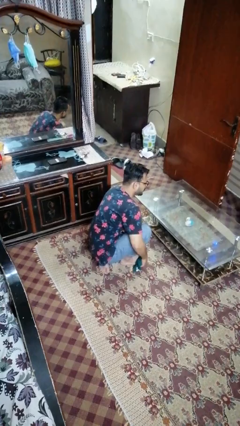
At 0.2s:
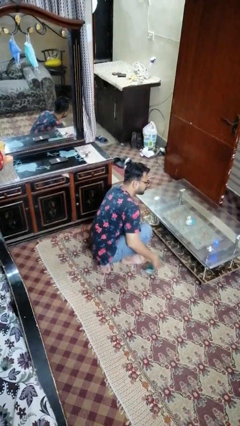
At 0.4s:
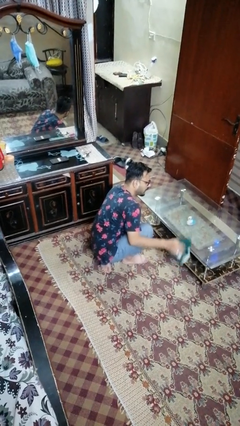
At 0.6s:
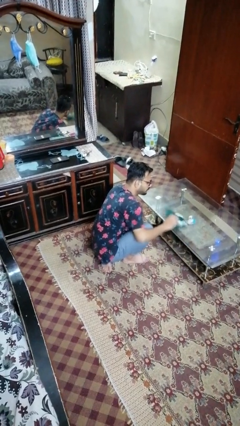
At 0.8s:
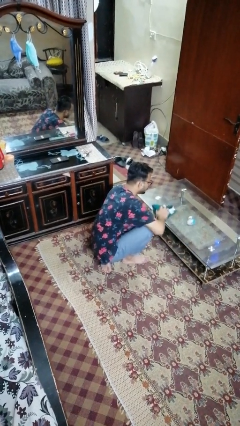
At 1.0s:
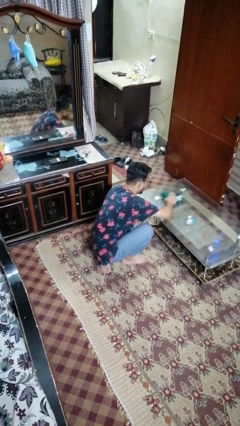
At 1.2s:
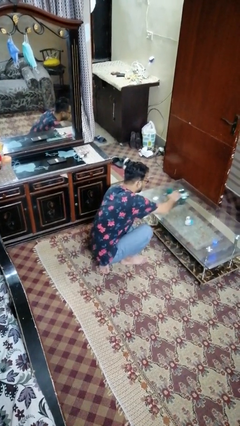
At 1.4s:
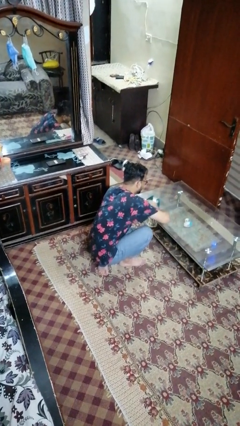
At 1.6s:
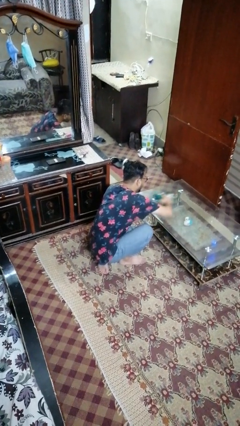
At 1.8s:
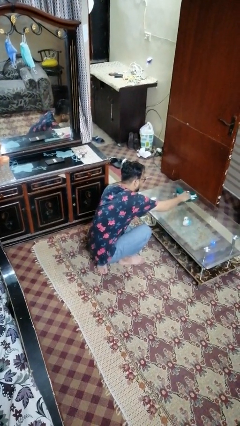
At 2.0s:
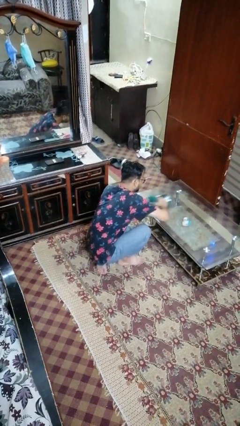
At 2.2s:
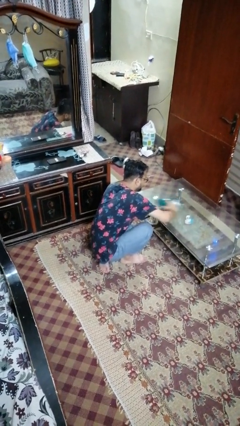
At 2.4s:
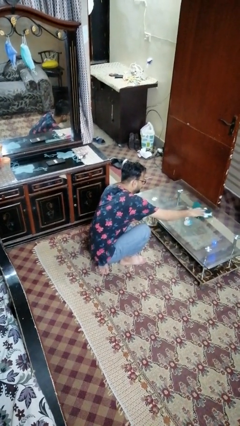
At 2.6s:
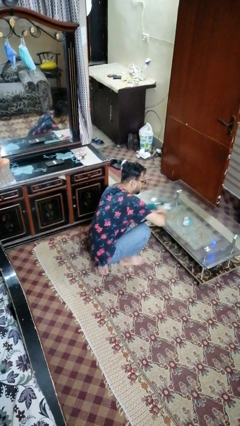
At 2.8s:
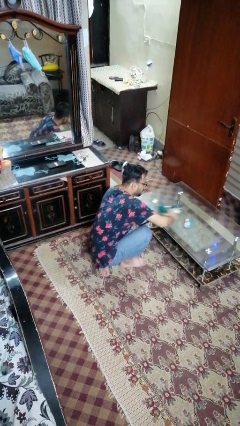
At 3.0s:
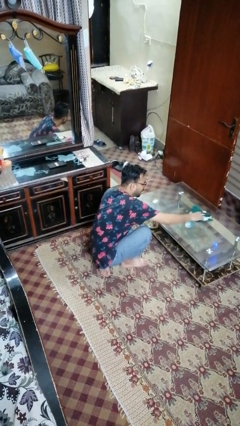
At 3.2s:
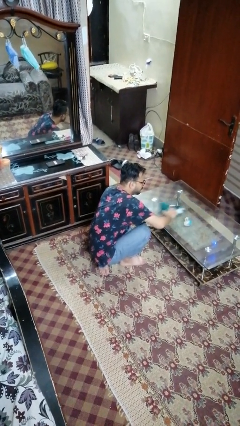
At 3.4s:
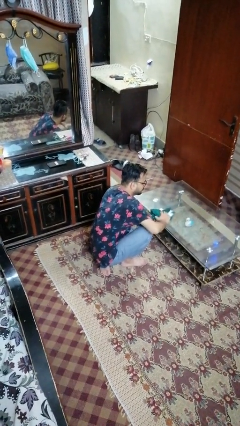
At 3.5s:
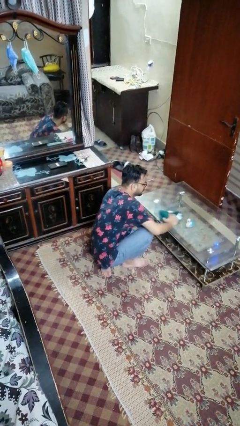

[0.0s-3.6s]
person cleans table with rag

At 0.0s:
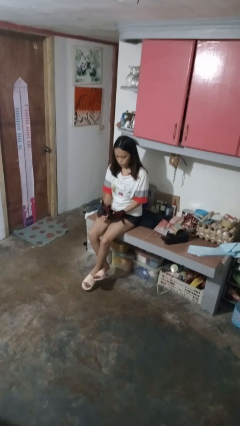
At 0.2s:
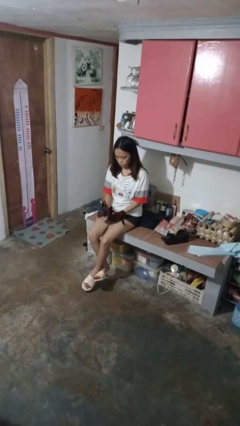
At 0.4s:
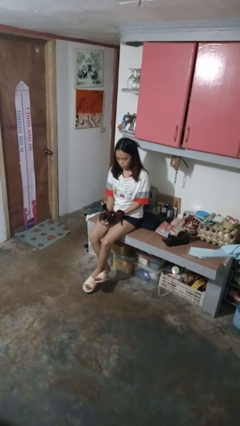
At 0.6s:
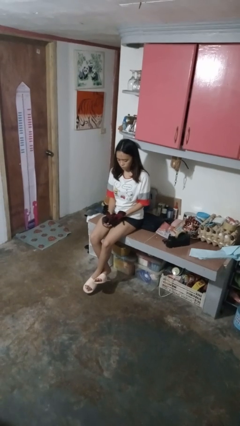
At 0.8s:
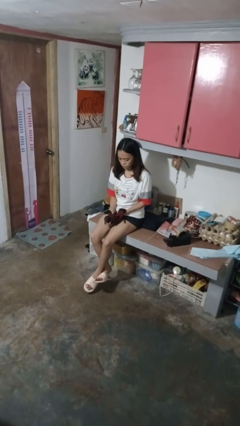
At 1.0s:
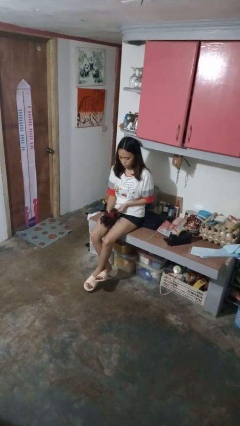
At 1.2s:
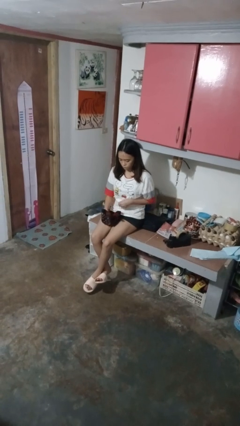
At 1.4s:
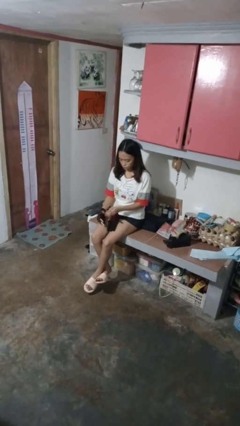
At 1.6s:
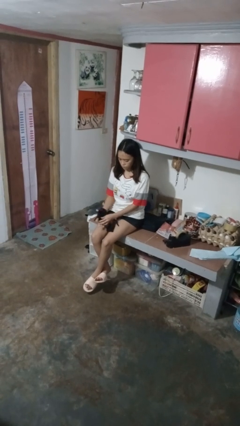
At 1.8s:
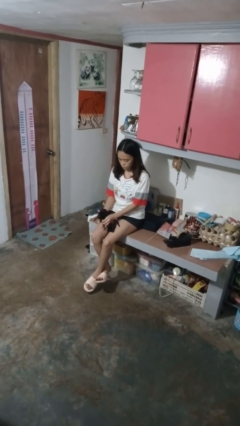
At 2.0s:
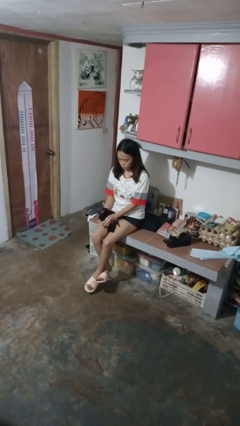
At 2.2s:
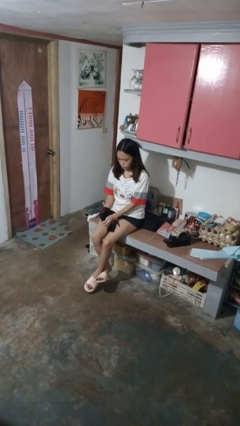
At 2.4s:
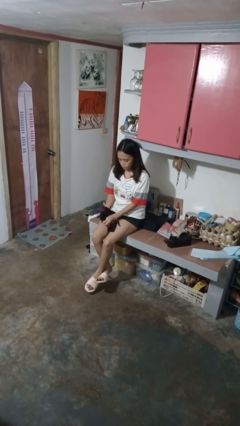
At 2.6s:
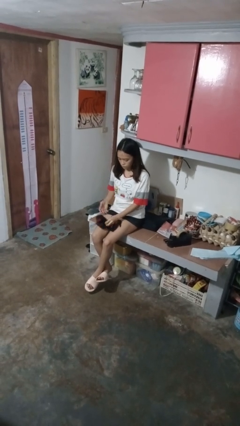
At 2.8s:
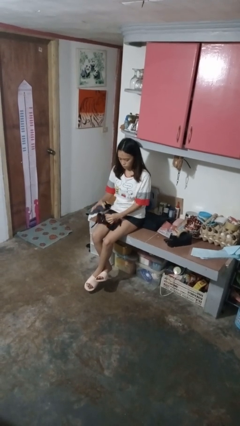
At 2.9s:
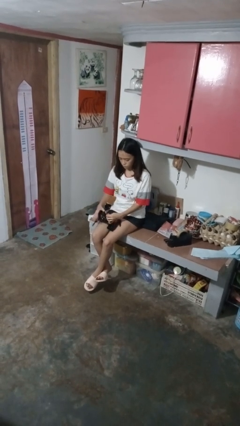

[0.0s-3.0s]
person takes off gloves

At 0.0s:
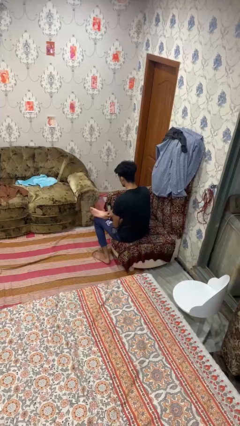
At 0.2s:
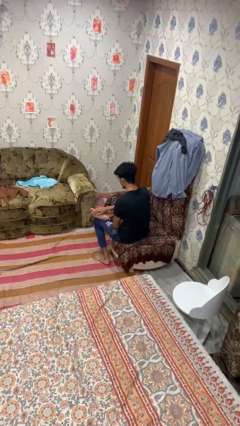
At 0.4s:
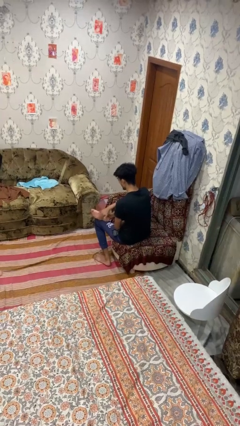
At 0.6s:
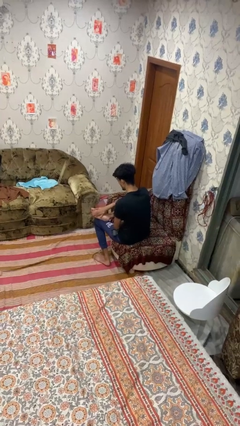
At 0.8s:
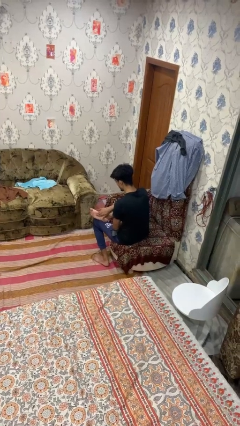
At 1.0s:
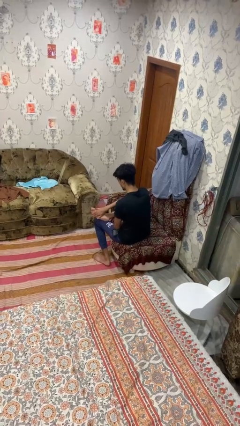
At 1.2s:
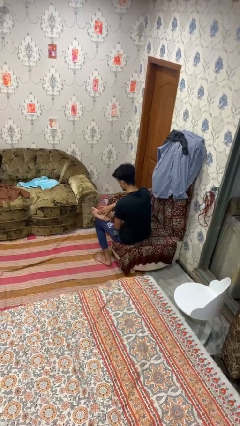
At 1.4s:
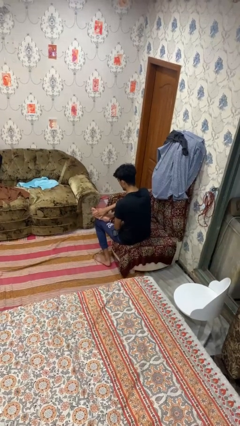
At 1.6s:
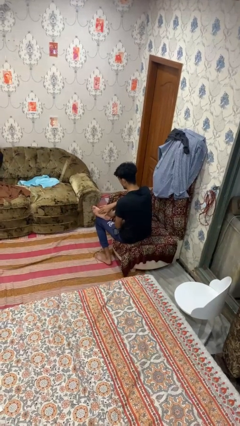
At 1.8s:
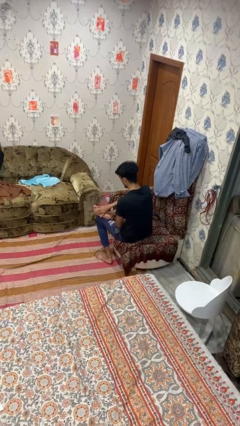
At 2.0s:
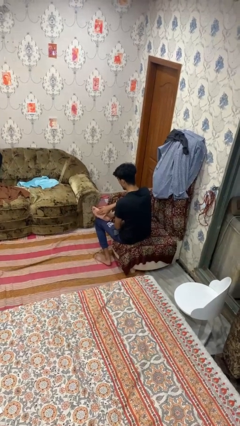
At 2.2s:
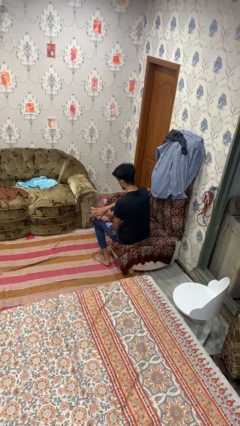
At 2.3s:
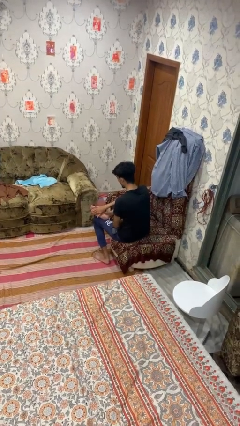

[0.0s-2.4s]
person rubs foot

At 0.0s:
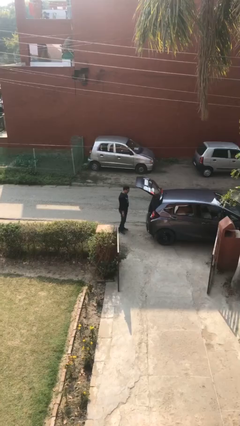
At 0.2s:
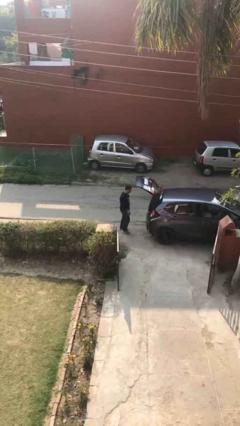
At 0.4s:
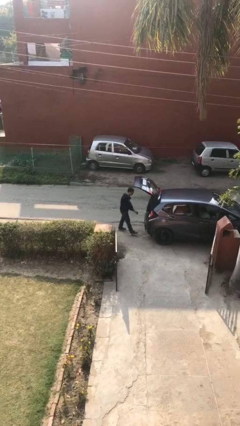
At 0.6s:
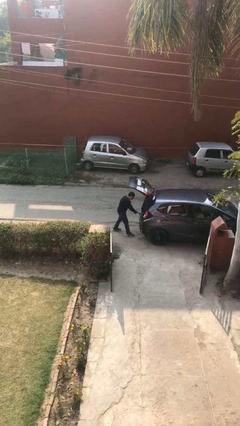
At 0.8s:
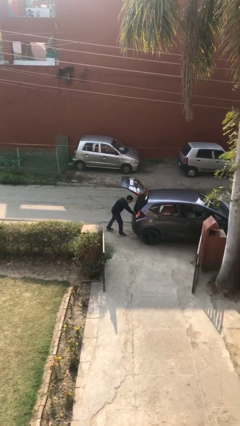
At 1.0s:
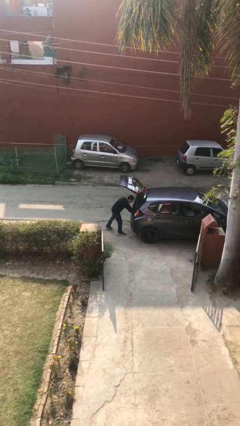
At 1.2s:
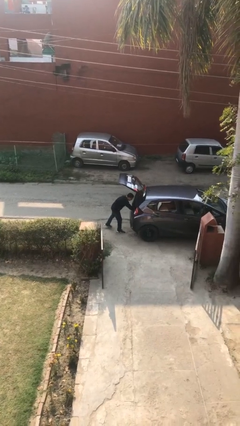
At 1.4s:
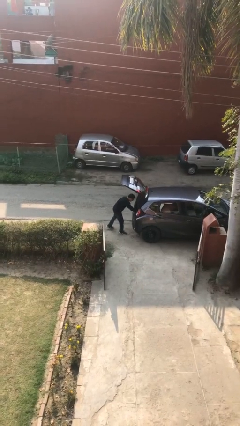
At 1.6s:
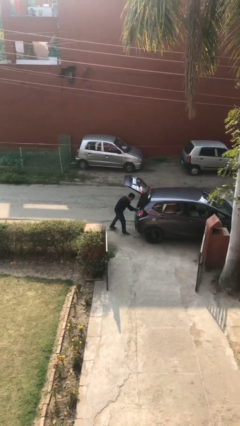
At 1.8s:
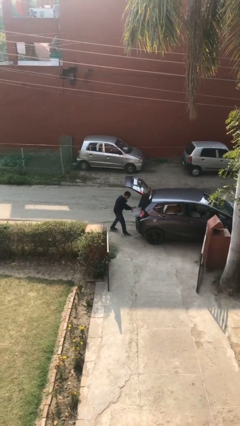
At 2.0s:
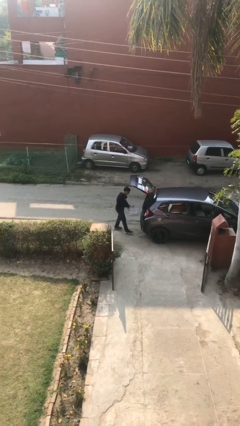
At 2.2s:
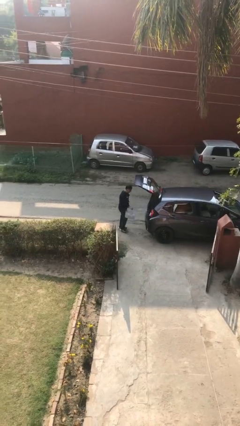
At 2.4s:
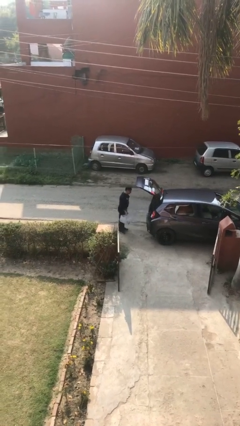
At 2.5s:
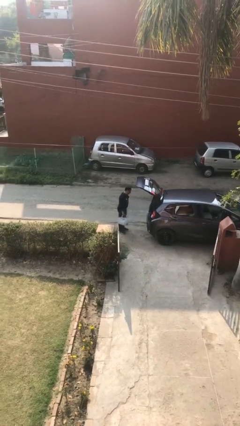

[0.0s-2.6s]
person unloads car

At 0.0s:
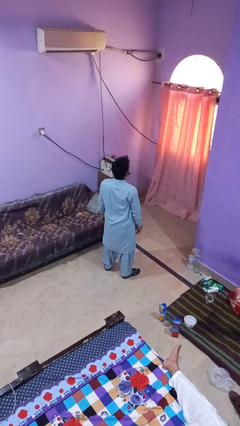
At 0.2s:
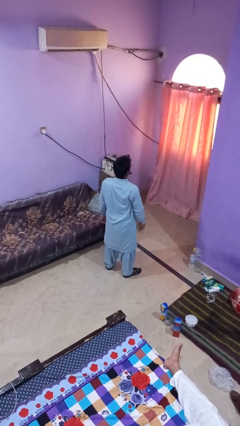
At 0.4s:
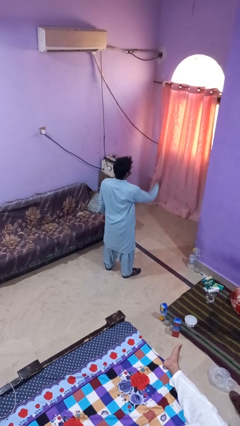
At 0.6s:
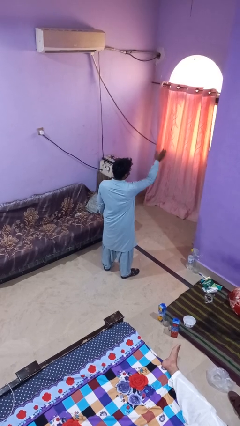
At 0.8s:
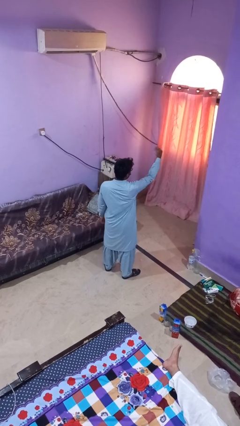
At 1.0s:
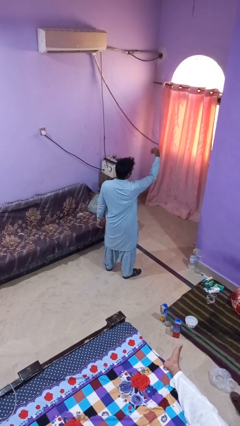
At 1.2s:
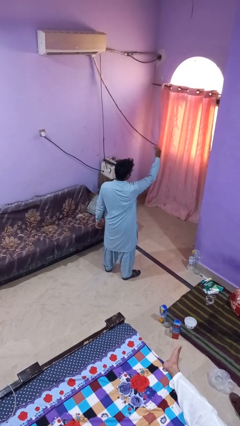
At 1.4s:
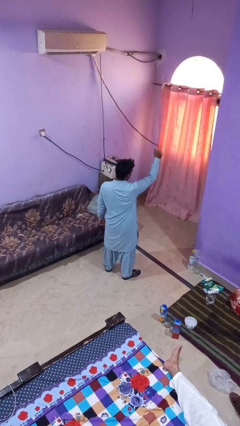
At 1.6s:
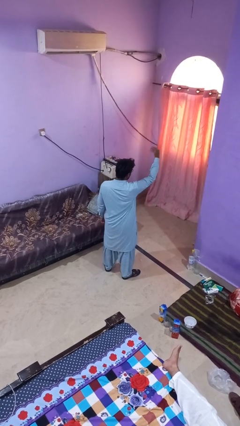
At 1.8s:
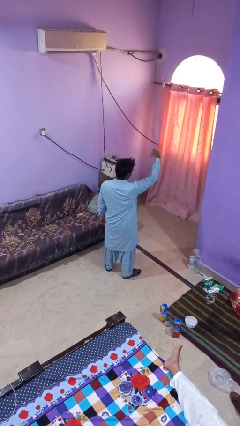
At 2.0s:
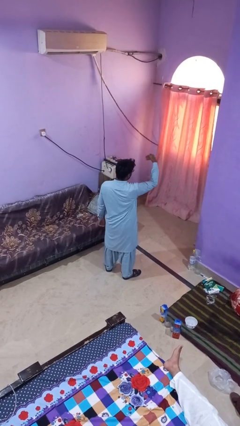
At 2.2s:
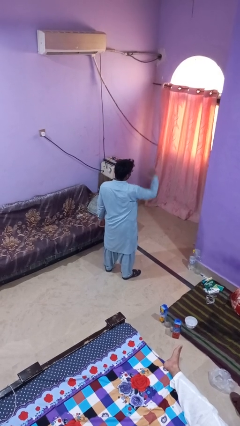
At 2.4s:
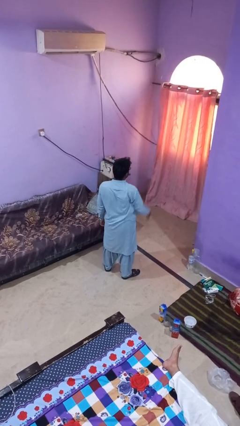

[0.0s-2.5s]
person gestures come here

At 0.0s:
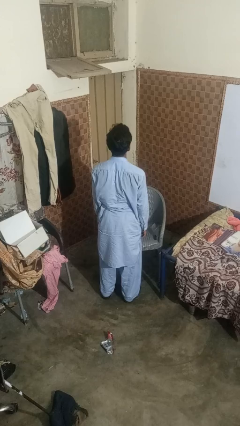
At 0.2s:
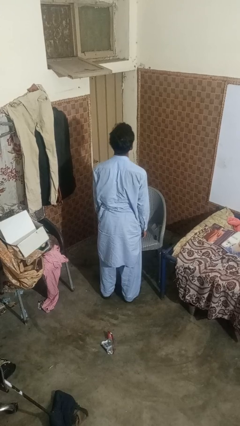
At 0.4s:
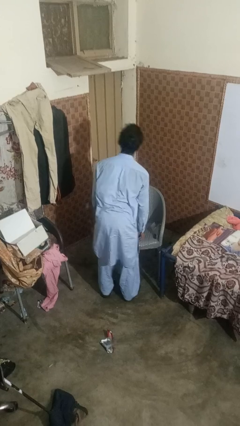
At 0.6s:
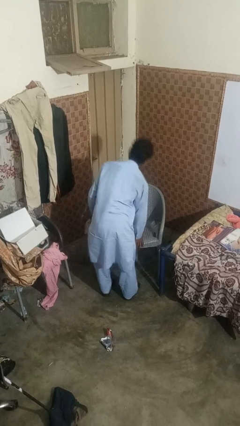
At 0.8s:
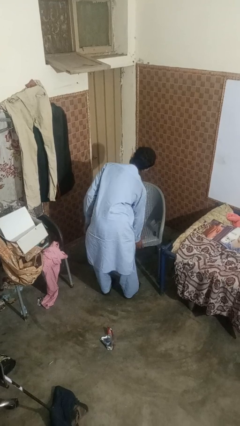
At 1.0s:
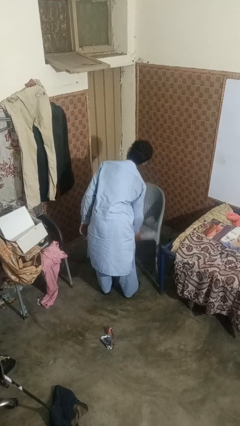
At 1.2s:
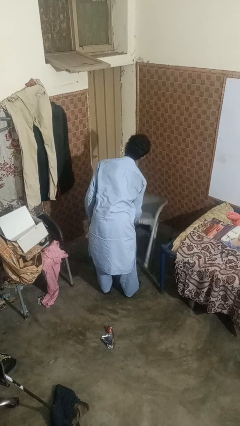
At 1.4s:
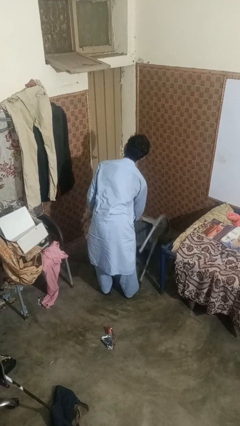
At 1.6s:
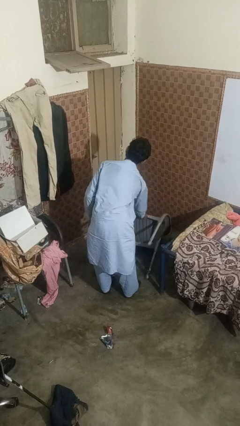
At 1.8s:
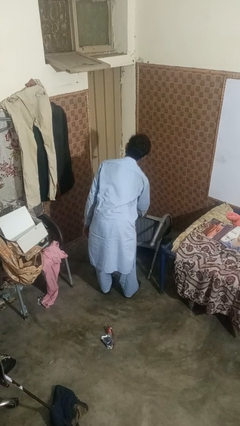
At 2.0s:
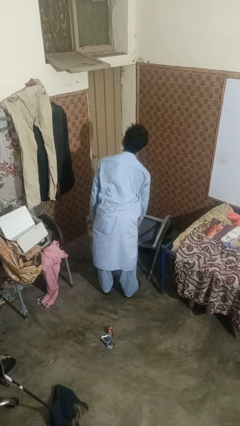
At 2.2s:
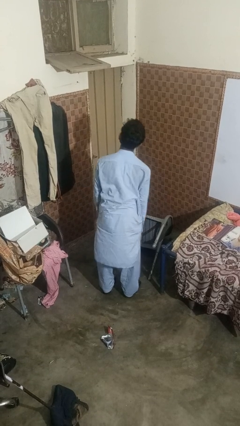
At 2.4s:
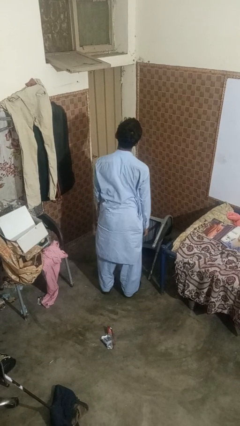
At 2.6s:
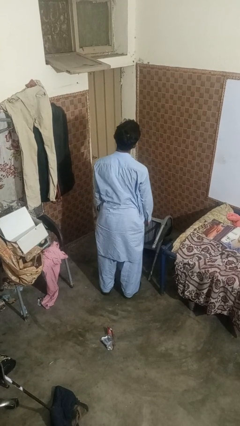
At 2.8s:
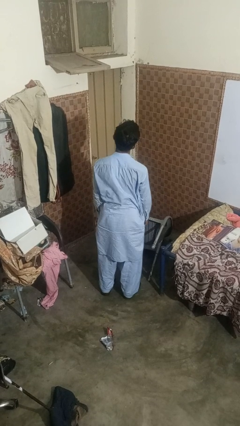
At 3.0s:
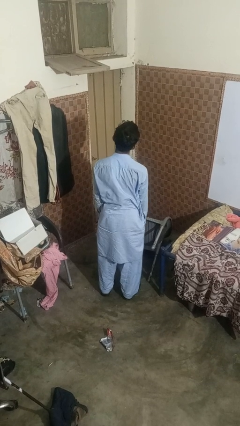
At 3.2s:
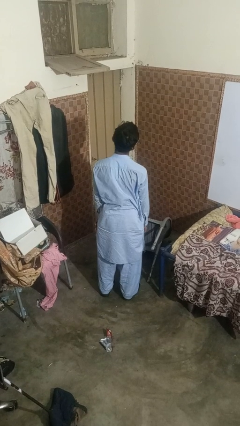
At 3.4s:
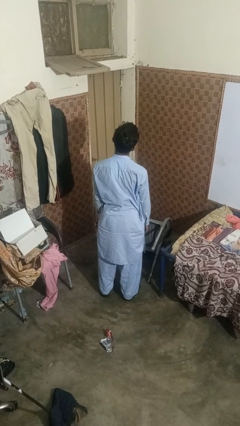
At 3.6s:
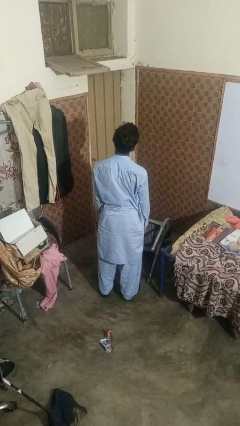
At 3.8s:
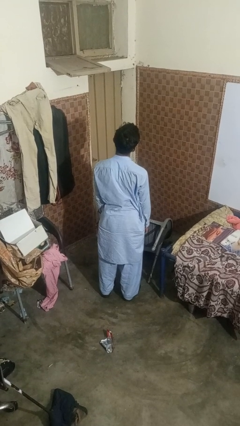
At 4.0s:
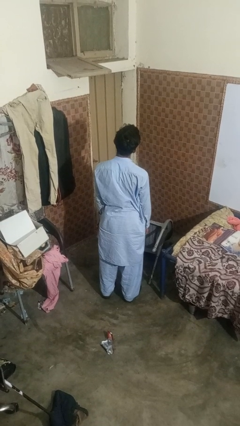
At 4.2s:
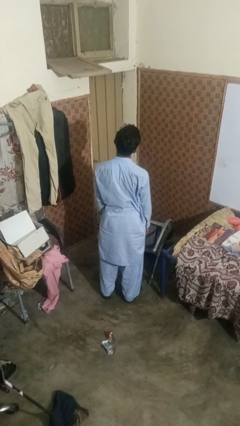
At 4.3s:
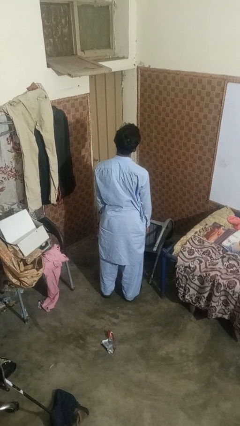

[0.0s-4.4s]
person knocks over furniture
